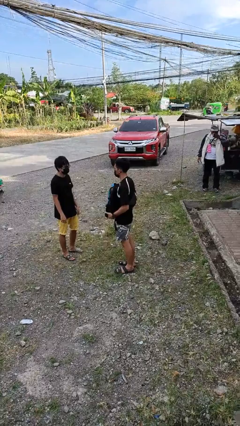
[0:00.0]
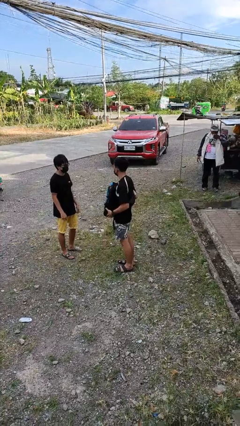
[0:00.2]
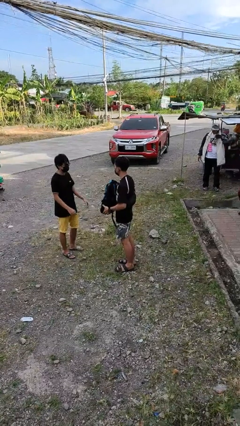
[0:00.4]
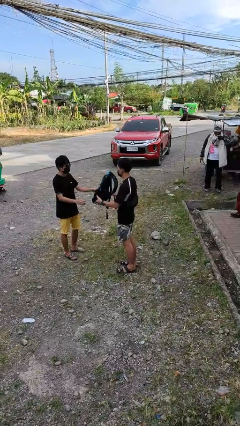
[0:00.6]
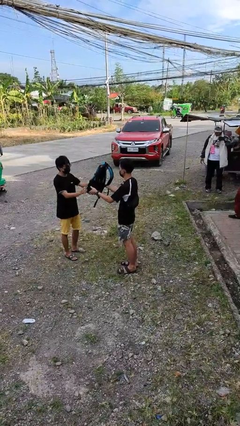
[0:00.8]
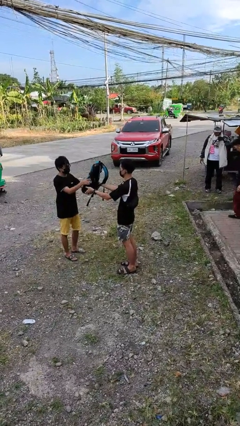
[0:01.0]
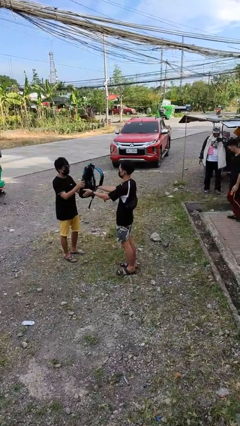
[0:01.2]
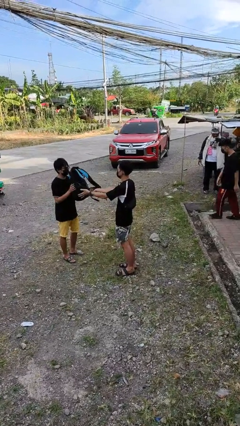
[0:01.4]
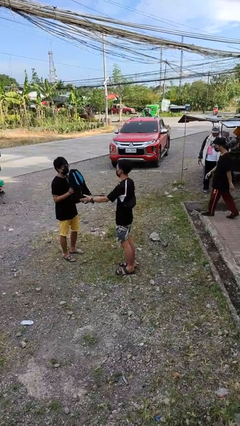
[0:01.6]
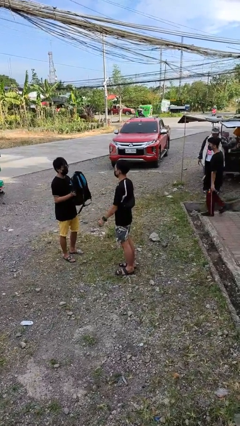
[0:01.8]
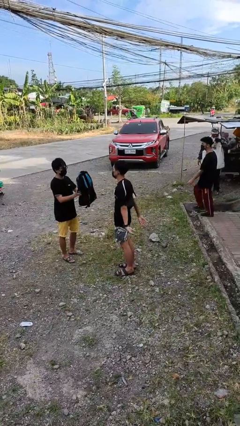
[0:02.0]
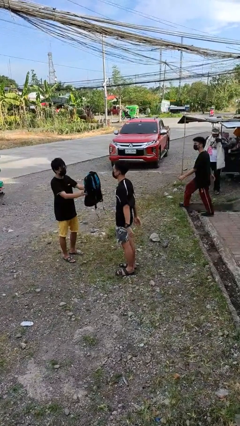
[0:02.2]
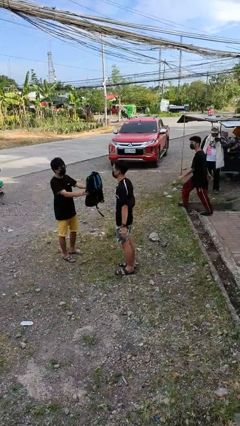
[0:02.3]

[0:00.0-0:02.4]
person transfers object to person

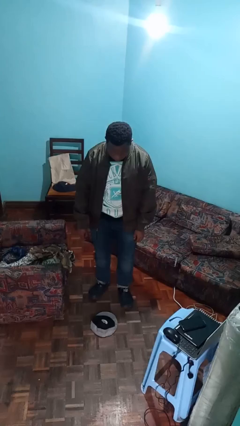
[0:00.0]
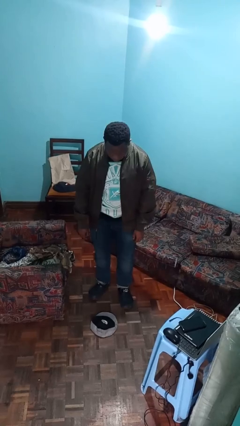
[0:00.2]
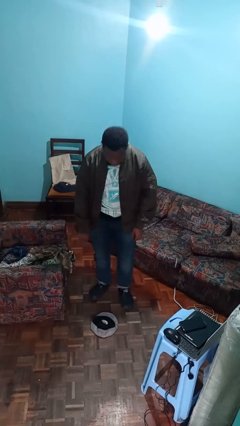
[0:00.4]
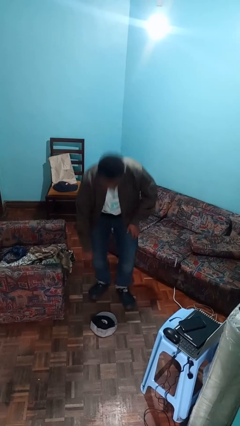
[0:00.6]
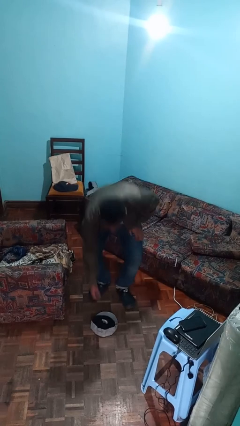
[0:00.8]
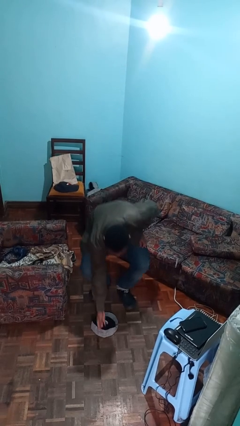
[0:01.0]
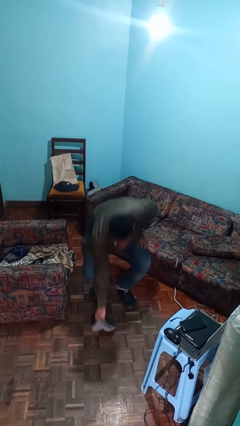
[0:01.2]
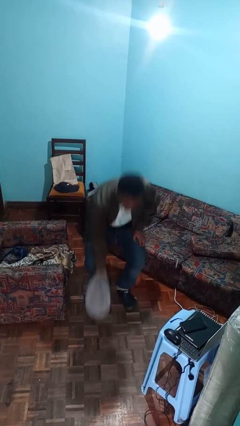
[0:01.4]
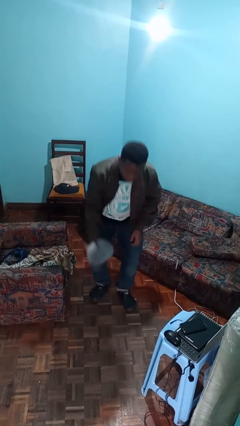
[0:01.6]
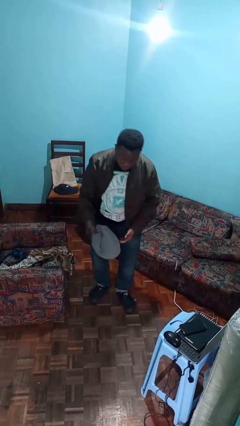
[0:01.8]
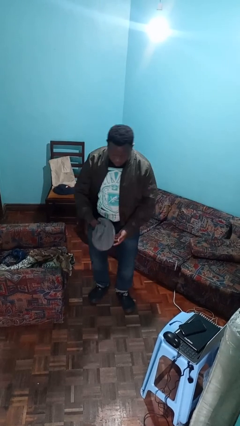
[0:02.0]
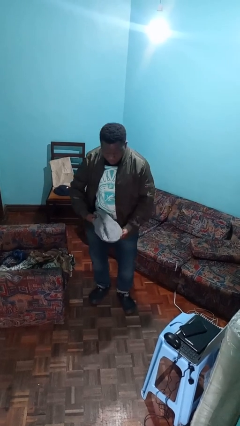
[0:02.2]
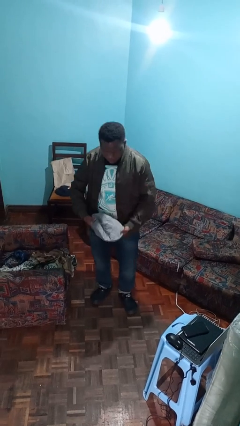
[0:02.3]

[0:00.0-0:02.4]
person picks up object from floor

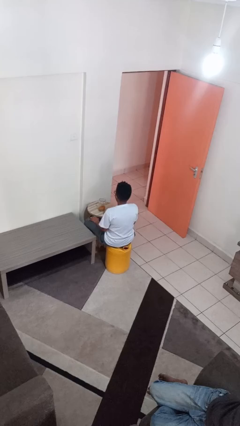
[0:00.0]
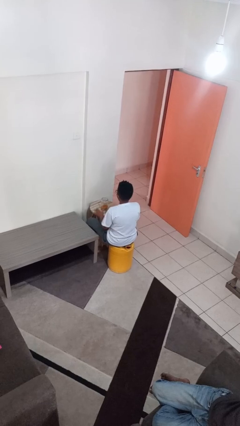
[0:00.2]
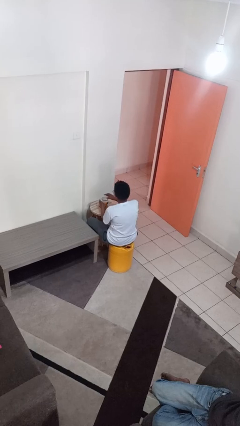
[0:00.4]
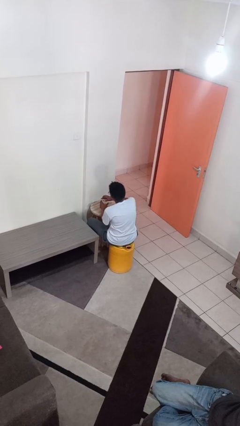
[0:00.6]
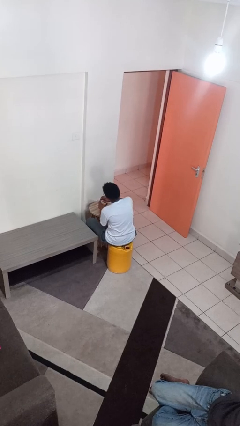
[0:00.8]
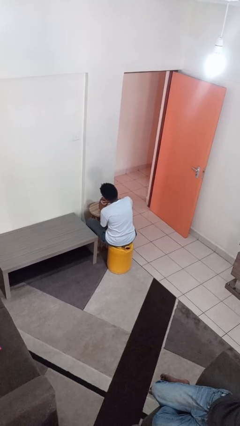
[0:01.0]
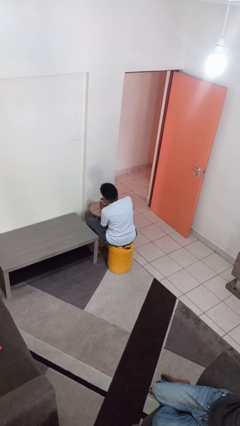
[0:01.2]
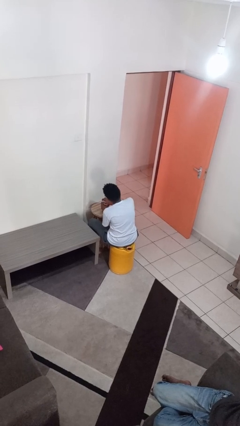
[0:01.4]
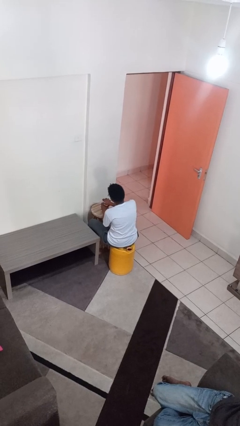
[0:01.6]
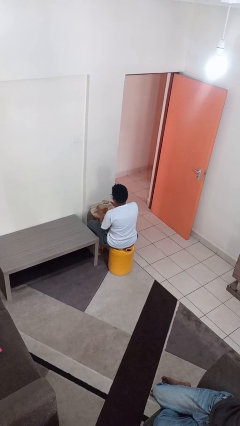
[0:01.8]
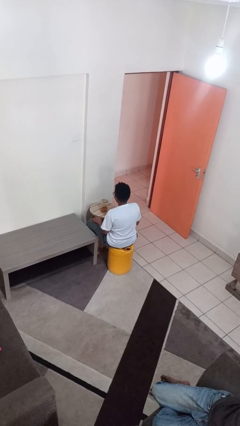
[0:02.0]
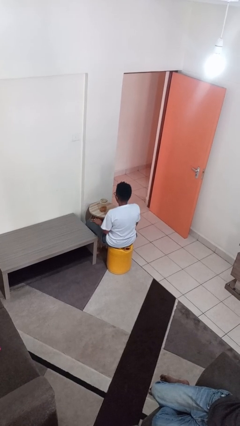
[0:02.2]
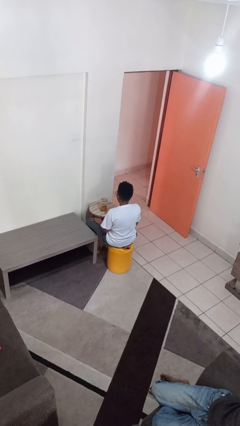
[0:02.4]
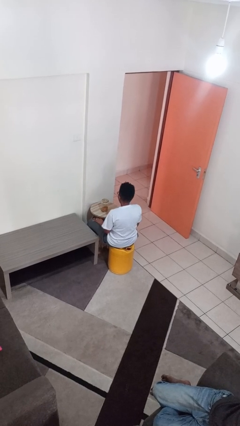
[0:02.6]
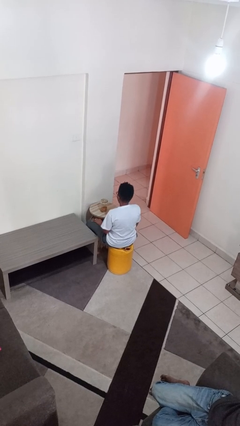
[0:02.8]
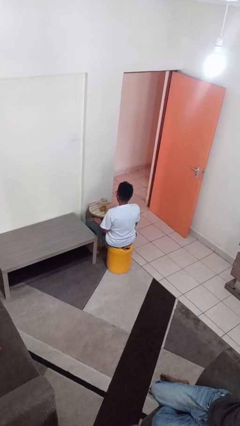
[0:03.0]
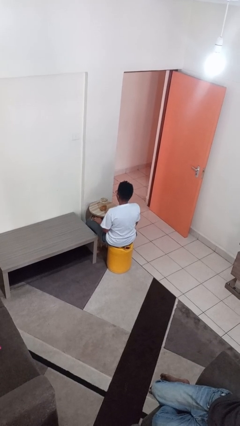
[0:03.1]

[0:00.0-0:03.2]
person closes jar

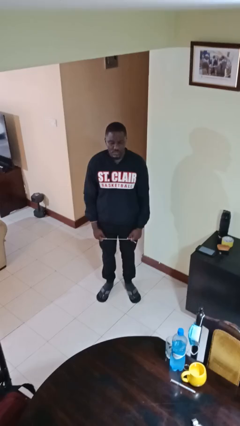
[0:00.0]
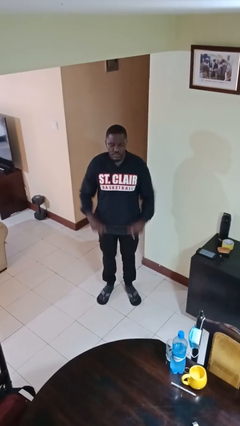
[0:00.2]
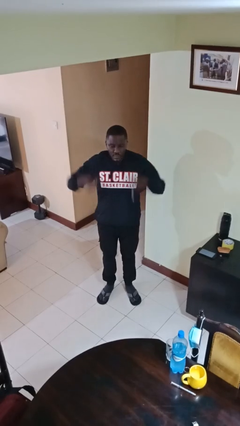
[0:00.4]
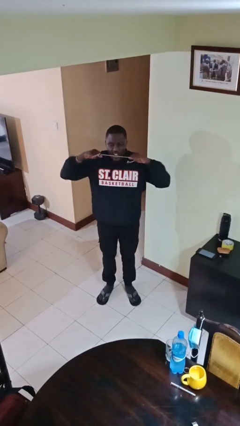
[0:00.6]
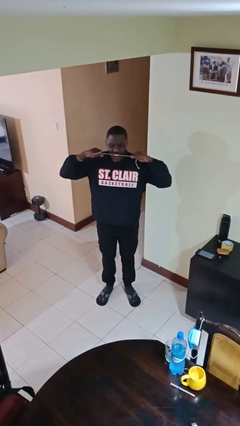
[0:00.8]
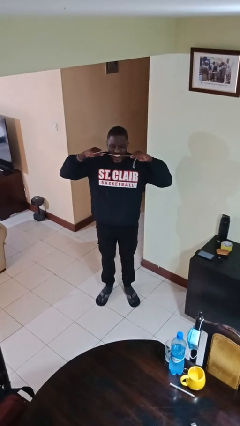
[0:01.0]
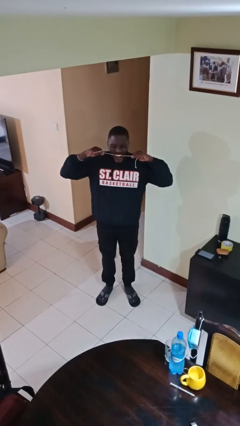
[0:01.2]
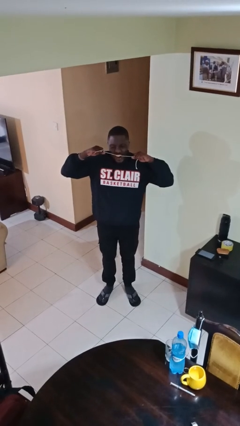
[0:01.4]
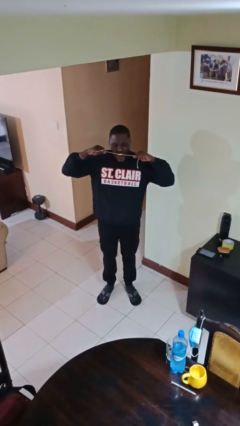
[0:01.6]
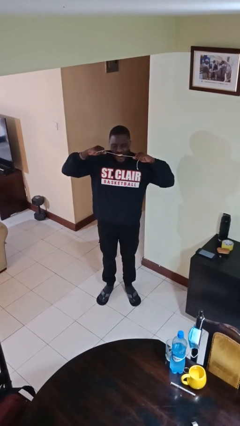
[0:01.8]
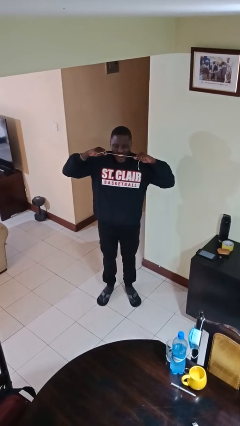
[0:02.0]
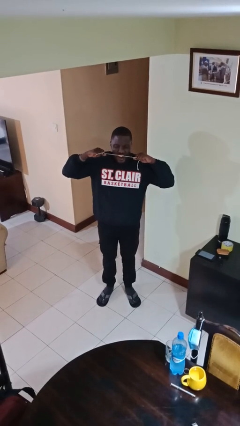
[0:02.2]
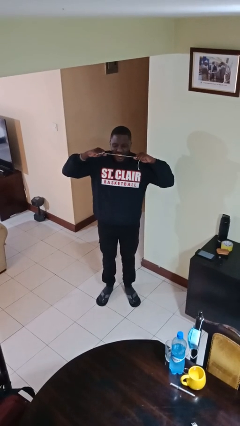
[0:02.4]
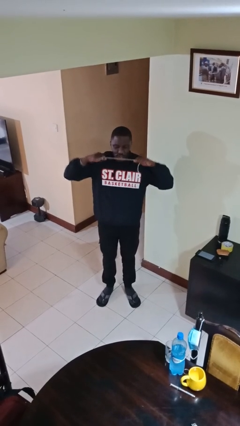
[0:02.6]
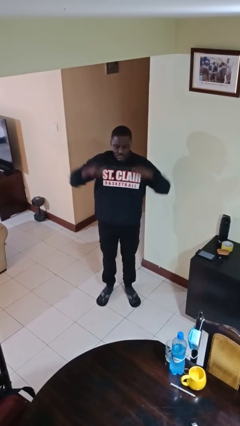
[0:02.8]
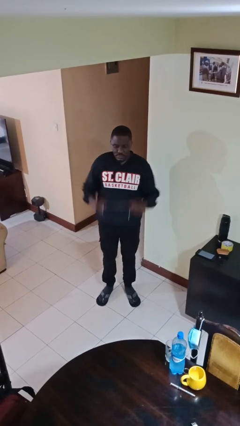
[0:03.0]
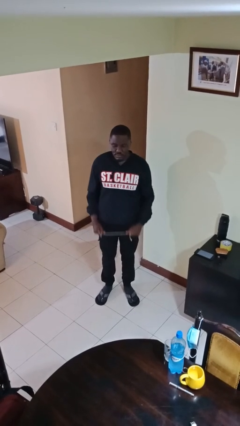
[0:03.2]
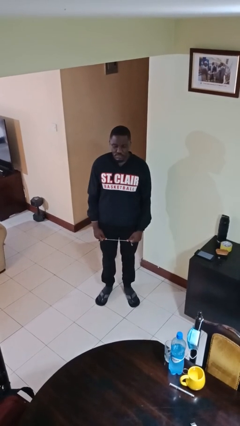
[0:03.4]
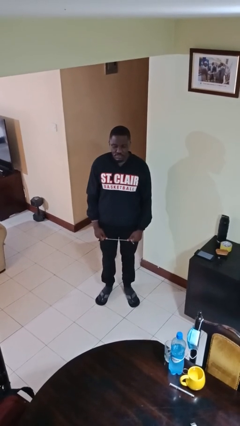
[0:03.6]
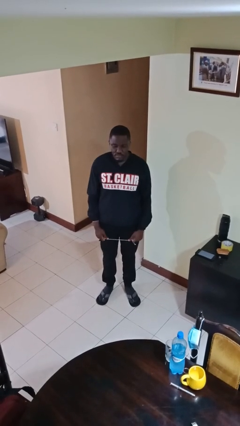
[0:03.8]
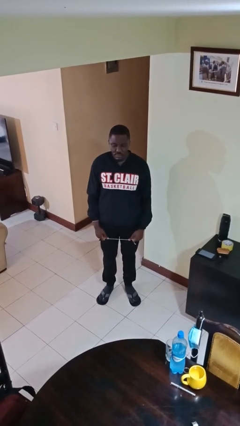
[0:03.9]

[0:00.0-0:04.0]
person flosses

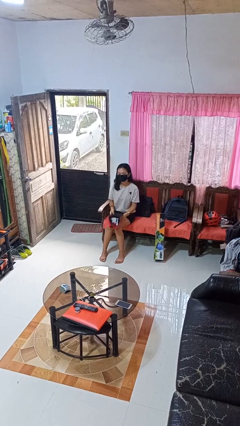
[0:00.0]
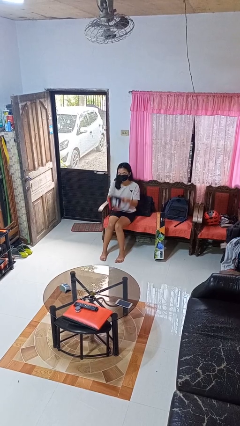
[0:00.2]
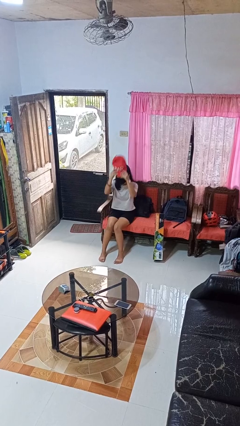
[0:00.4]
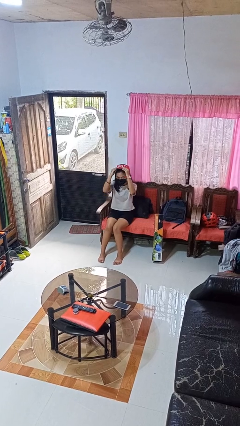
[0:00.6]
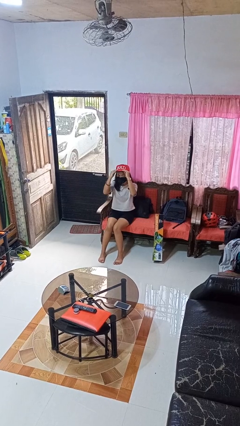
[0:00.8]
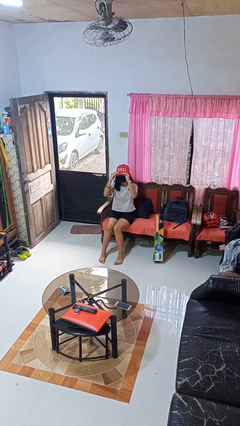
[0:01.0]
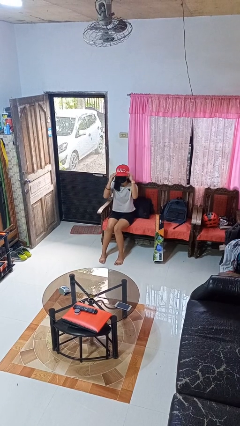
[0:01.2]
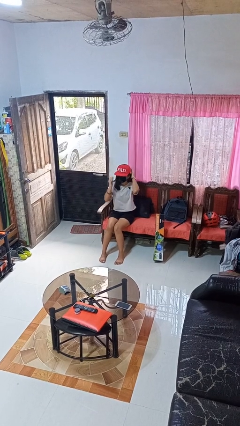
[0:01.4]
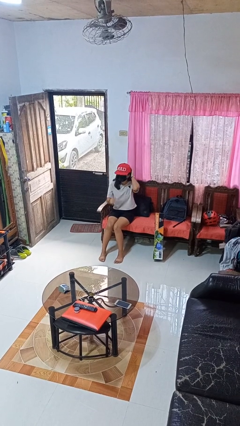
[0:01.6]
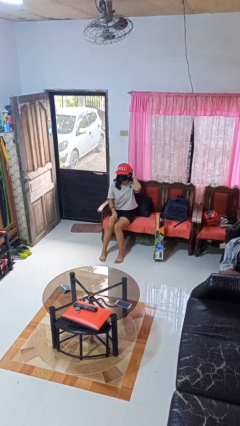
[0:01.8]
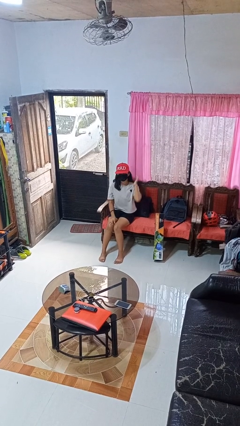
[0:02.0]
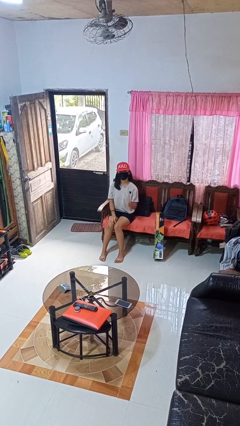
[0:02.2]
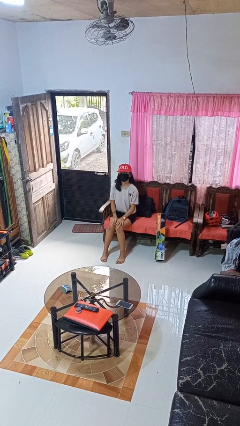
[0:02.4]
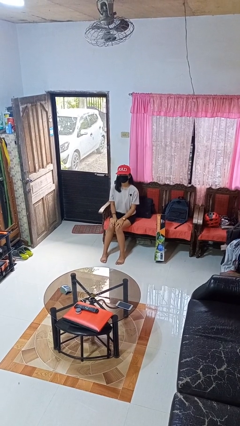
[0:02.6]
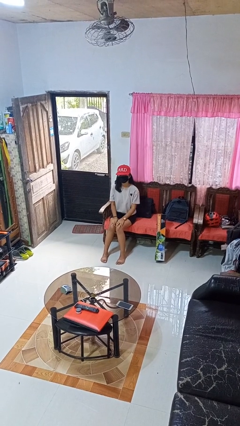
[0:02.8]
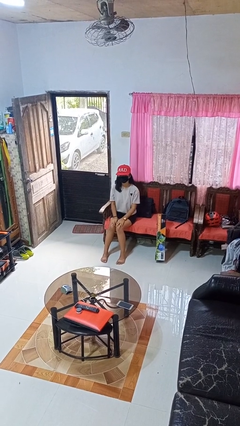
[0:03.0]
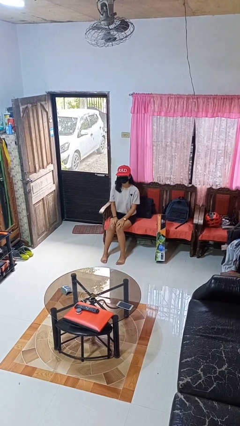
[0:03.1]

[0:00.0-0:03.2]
person puts on hat

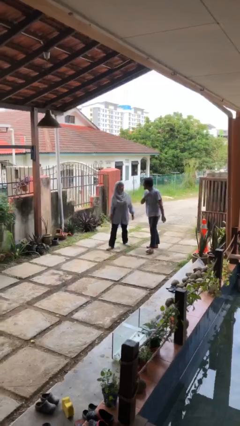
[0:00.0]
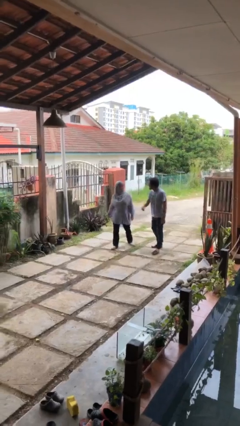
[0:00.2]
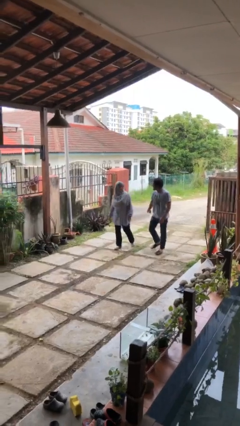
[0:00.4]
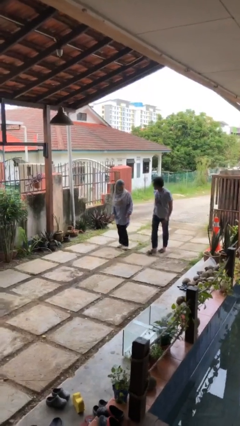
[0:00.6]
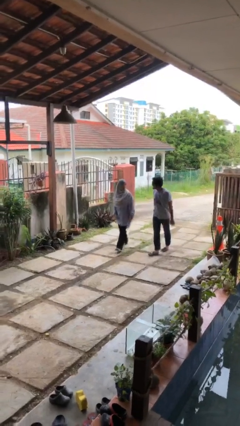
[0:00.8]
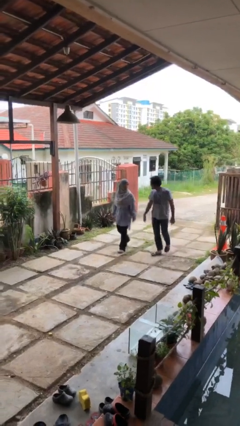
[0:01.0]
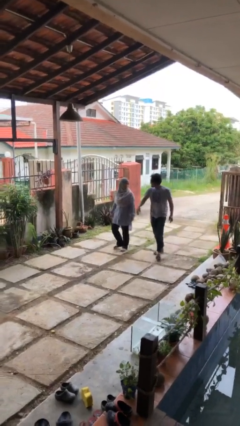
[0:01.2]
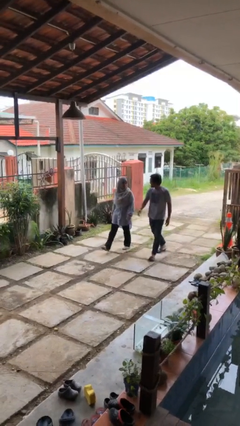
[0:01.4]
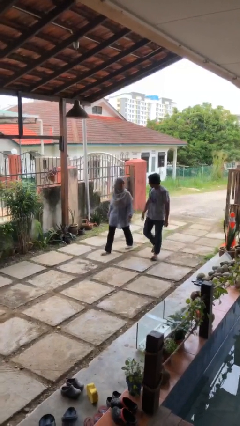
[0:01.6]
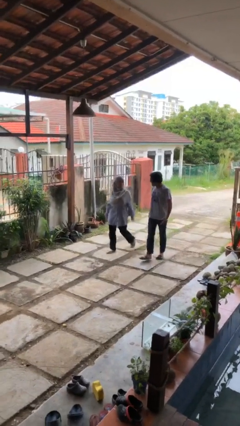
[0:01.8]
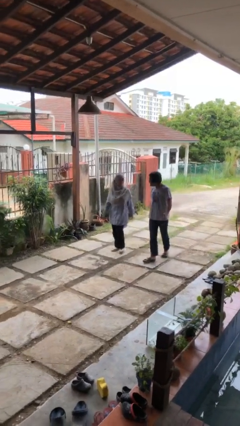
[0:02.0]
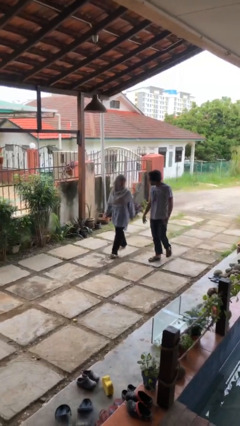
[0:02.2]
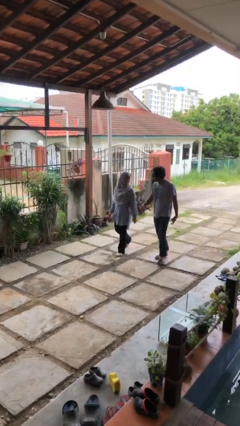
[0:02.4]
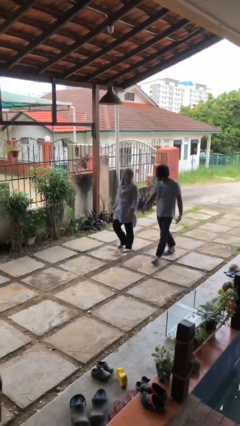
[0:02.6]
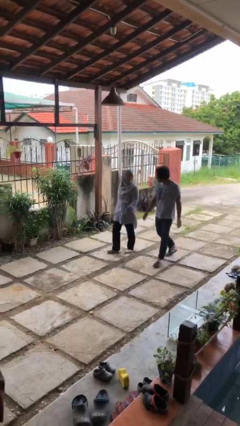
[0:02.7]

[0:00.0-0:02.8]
person talks to person
